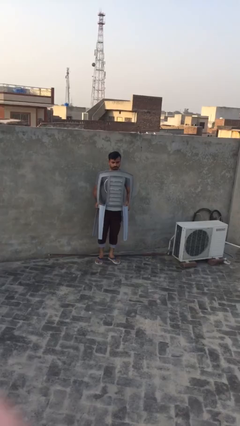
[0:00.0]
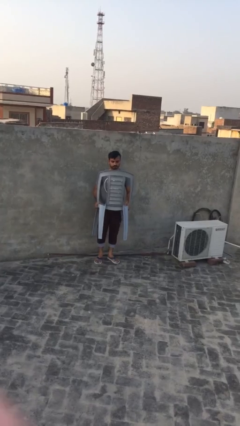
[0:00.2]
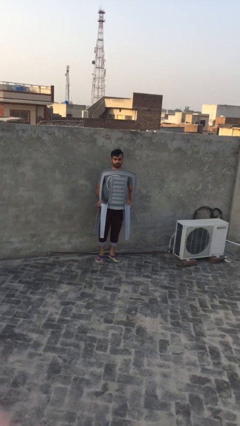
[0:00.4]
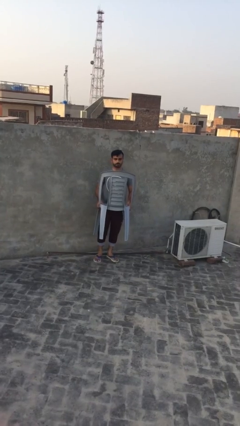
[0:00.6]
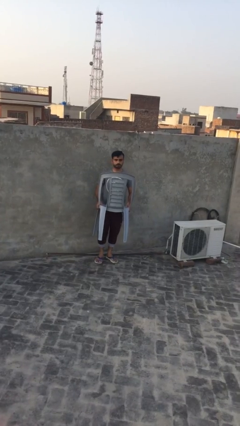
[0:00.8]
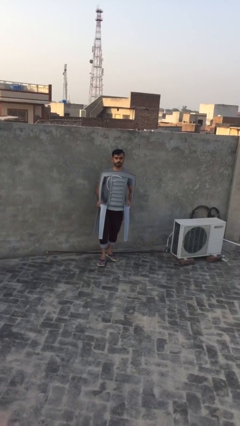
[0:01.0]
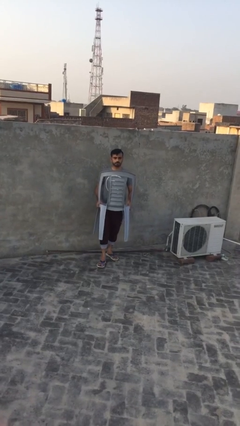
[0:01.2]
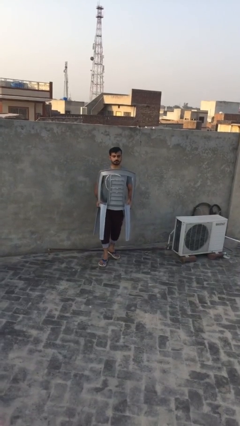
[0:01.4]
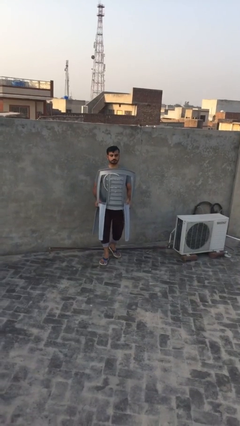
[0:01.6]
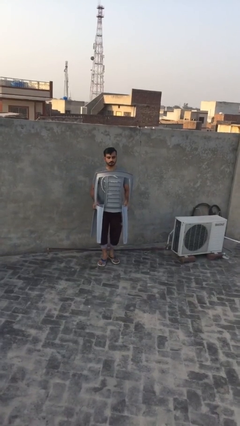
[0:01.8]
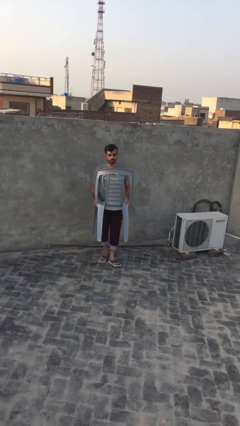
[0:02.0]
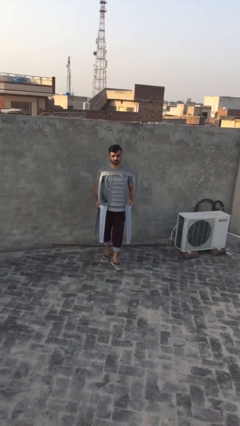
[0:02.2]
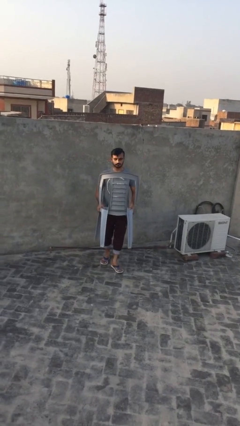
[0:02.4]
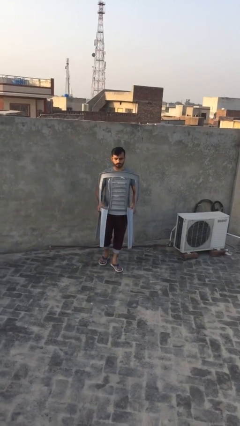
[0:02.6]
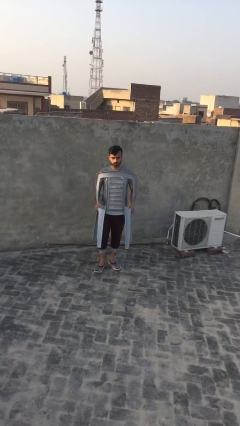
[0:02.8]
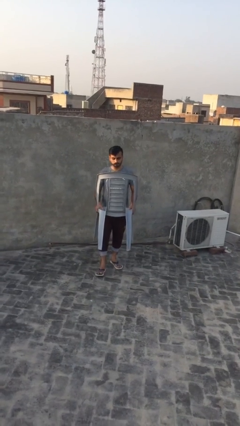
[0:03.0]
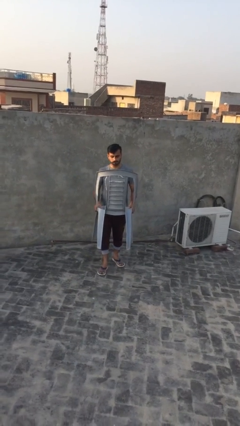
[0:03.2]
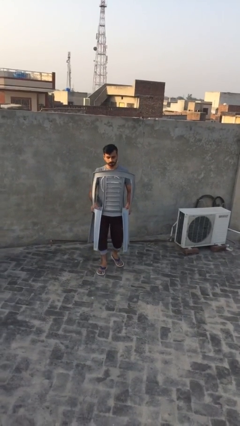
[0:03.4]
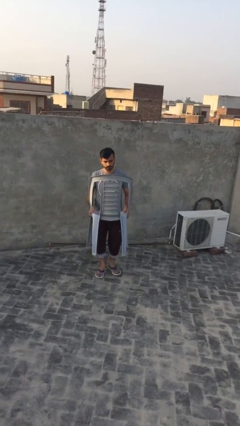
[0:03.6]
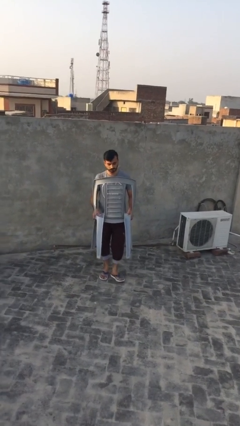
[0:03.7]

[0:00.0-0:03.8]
person carries heavy object

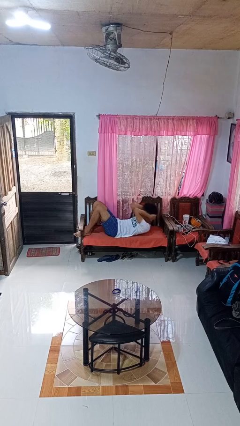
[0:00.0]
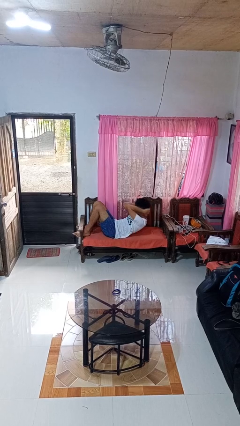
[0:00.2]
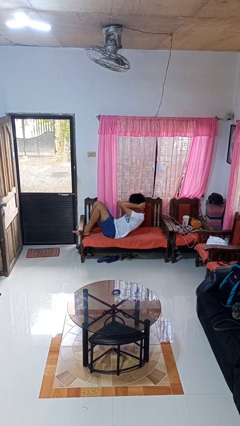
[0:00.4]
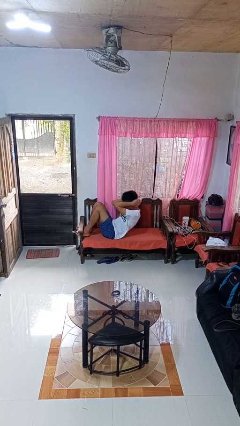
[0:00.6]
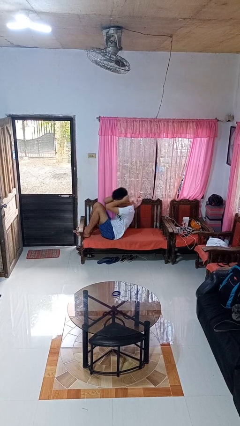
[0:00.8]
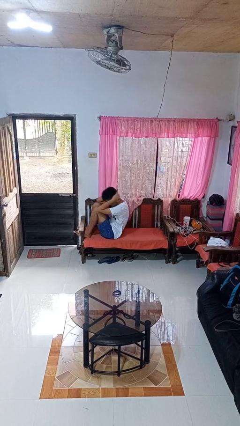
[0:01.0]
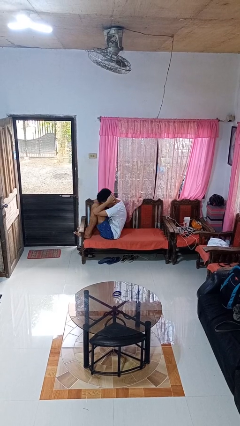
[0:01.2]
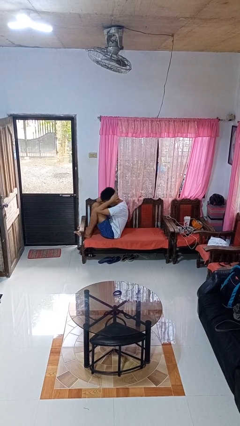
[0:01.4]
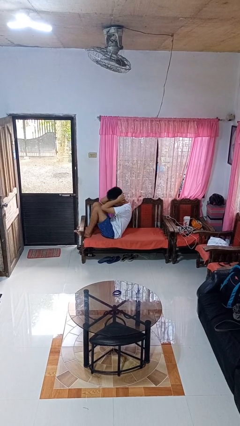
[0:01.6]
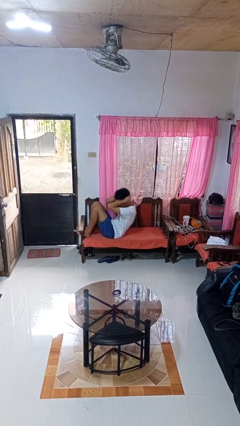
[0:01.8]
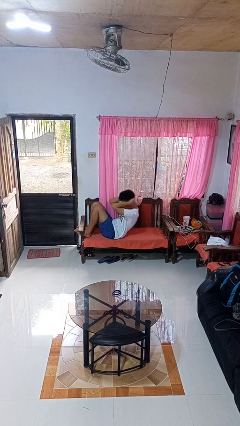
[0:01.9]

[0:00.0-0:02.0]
person exercises with situp

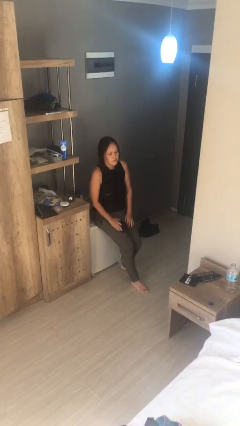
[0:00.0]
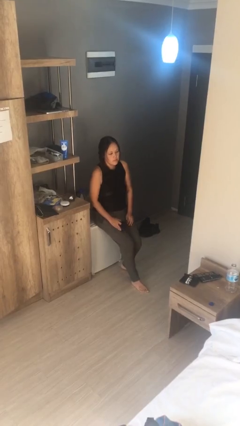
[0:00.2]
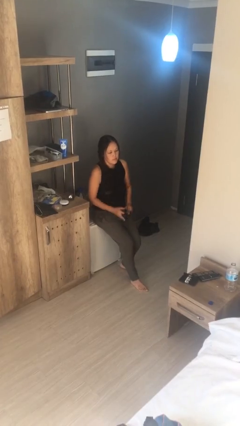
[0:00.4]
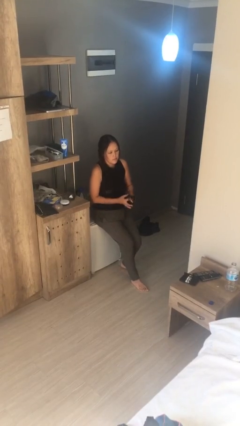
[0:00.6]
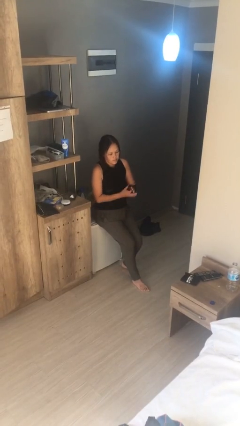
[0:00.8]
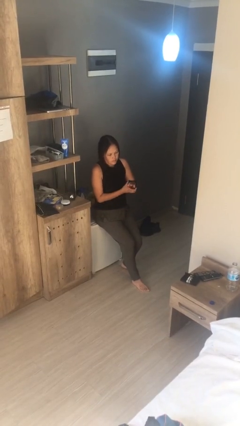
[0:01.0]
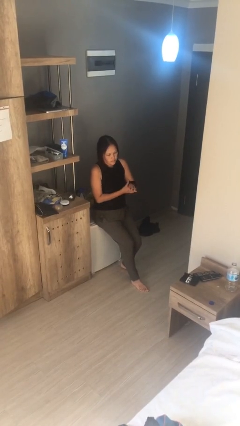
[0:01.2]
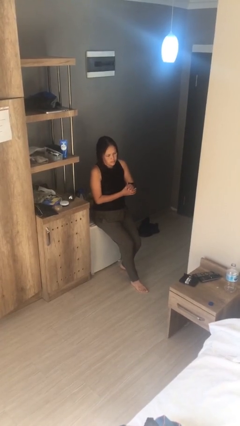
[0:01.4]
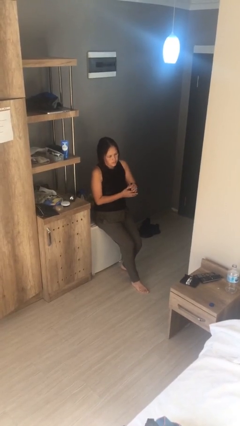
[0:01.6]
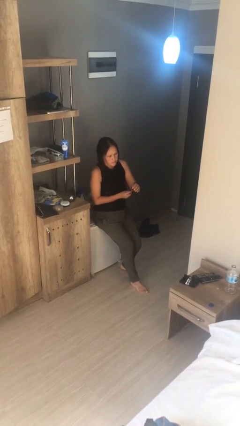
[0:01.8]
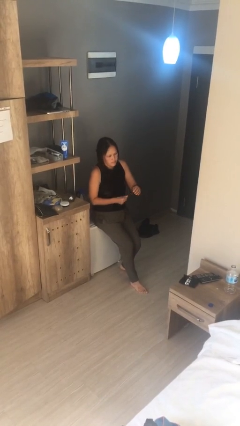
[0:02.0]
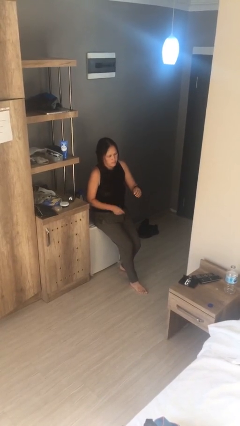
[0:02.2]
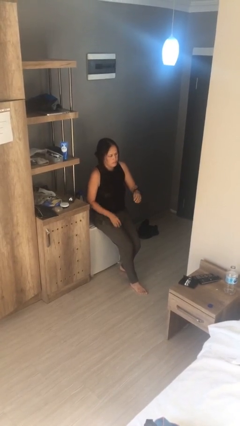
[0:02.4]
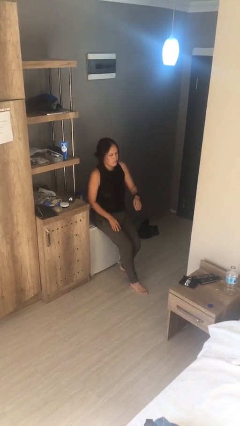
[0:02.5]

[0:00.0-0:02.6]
person puts on wristwatch

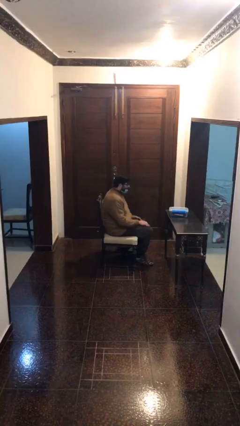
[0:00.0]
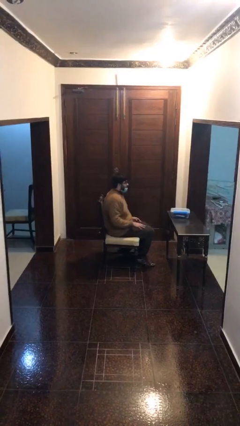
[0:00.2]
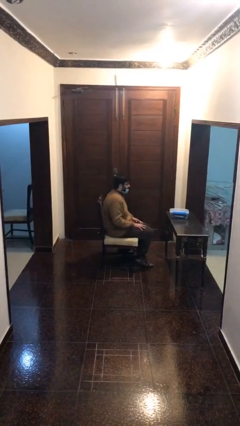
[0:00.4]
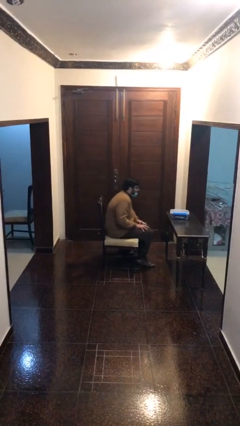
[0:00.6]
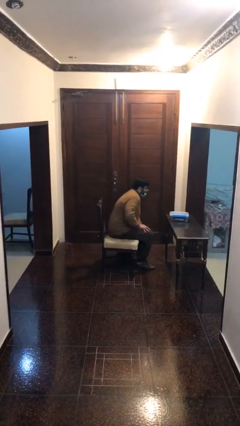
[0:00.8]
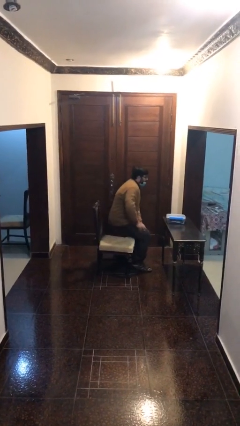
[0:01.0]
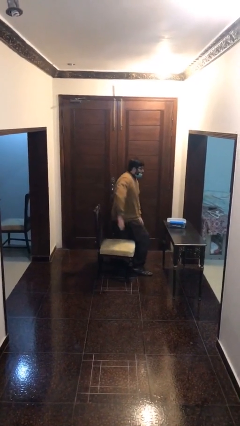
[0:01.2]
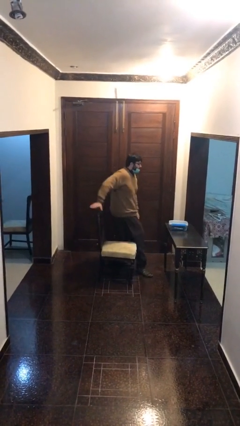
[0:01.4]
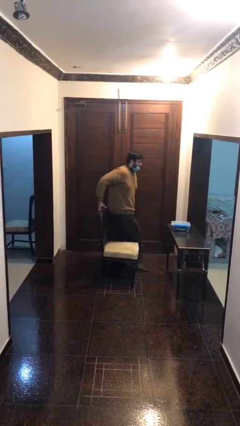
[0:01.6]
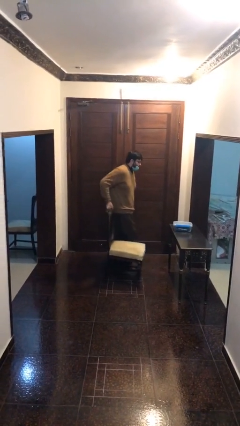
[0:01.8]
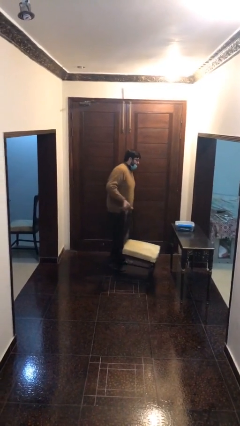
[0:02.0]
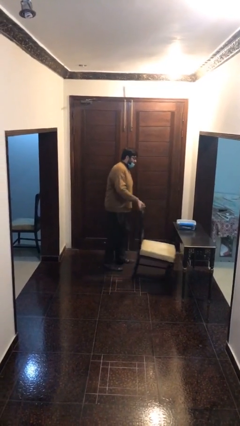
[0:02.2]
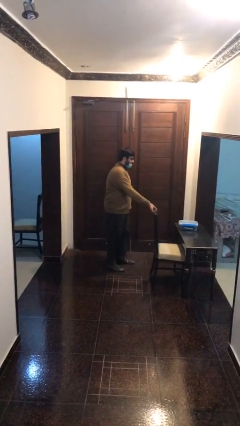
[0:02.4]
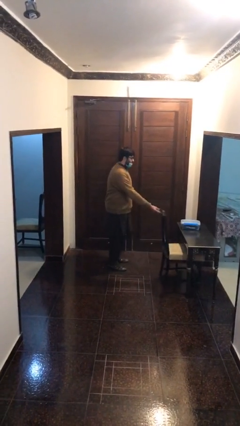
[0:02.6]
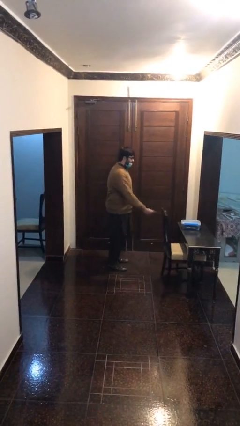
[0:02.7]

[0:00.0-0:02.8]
person stands up

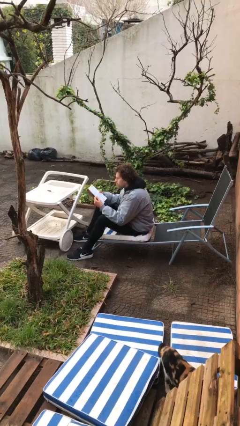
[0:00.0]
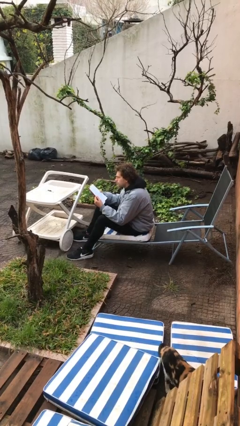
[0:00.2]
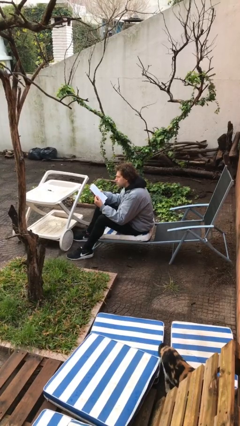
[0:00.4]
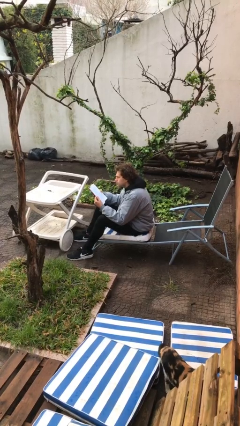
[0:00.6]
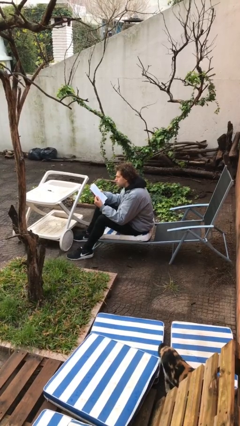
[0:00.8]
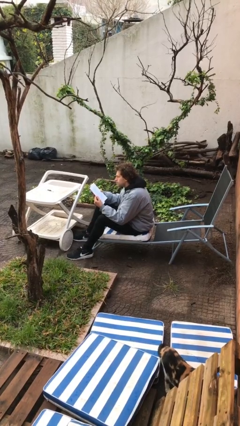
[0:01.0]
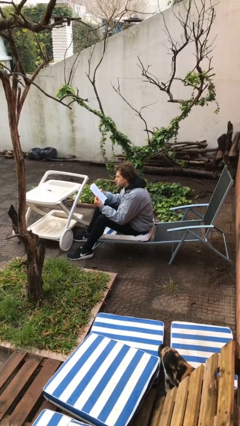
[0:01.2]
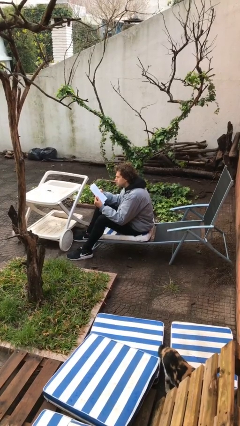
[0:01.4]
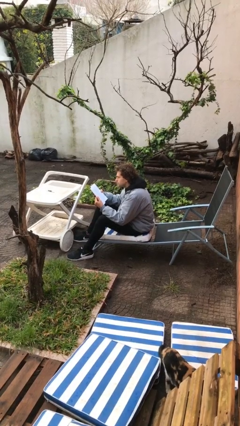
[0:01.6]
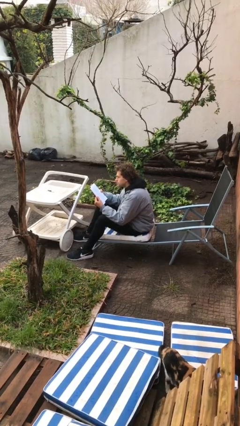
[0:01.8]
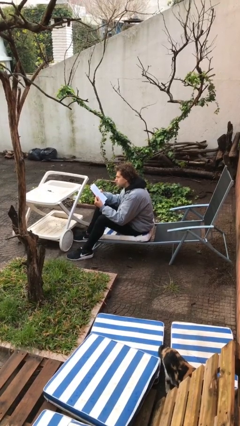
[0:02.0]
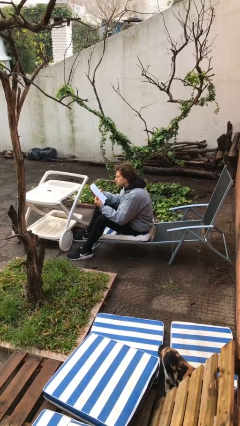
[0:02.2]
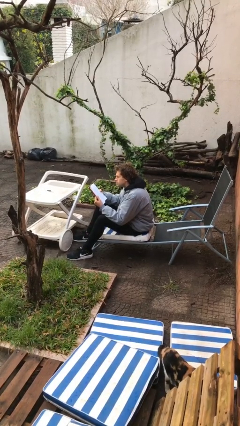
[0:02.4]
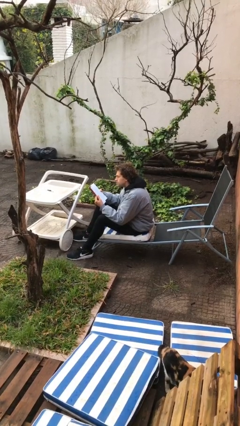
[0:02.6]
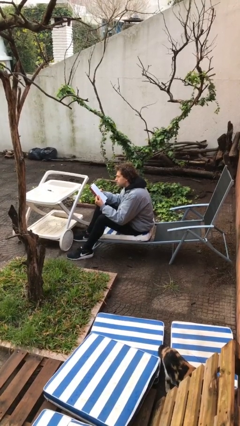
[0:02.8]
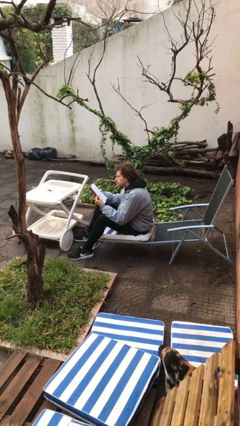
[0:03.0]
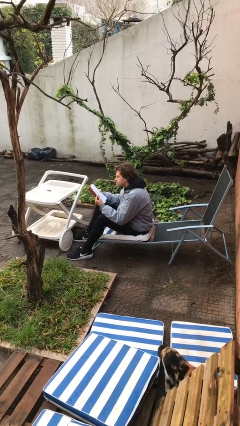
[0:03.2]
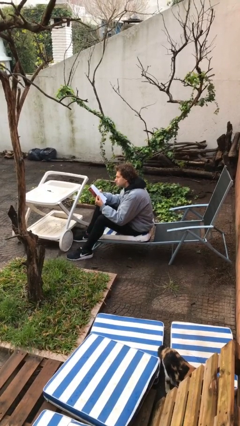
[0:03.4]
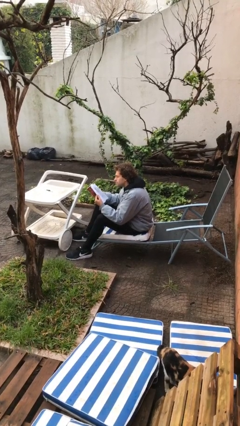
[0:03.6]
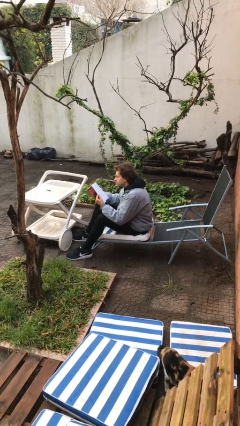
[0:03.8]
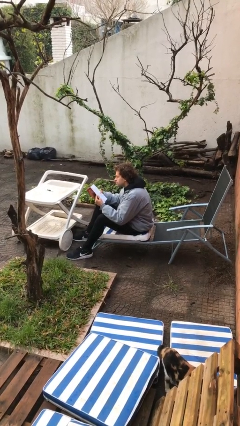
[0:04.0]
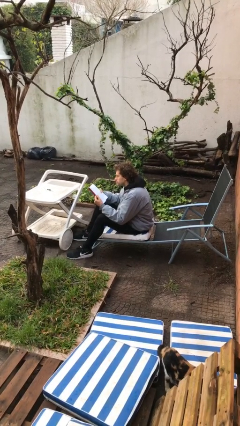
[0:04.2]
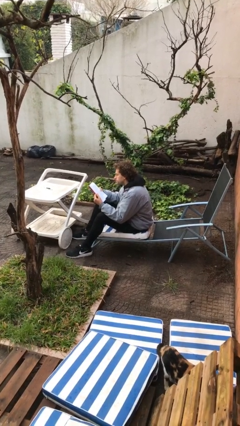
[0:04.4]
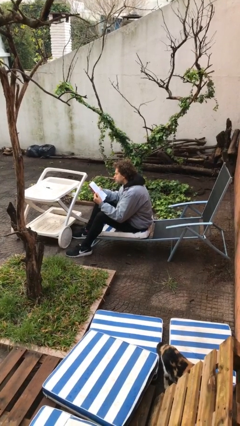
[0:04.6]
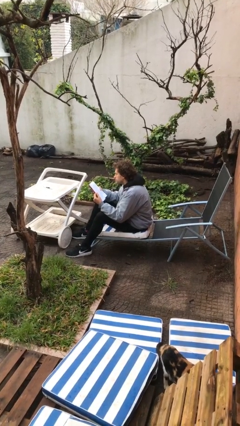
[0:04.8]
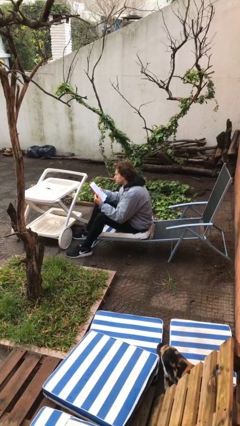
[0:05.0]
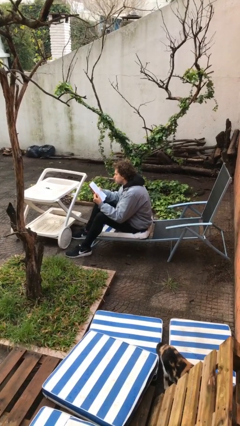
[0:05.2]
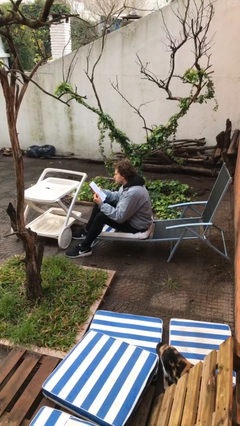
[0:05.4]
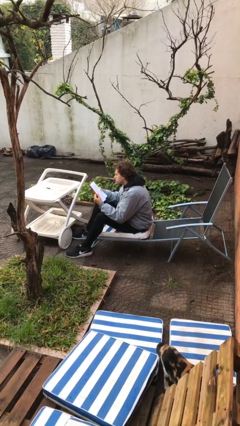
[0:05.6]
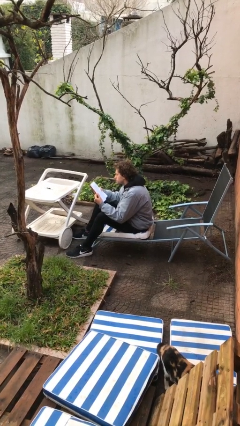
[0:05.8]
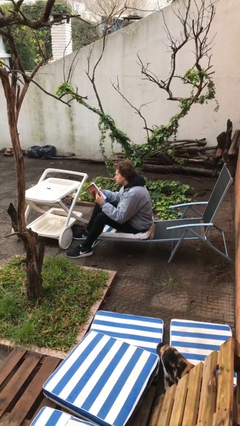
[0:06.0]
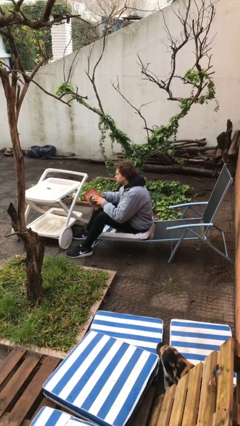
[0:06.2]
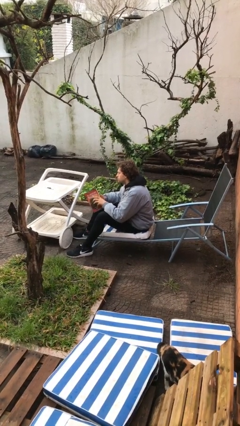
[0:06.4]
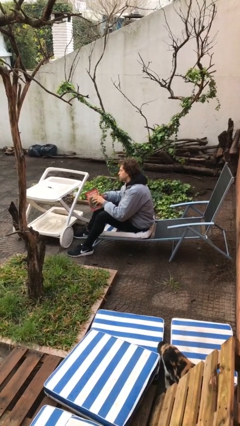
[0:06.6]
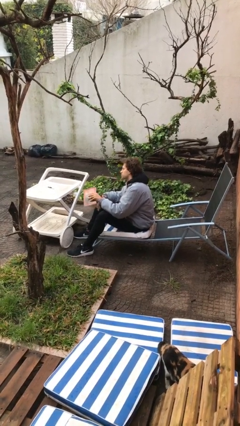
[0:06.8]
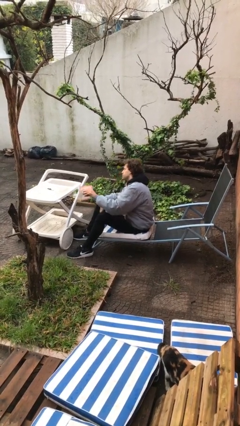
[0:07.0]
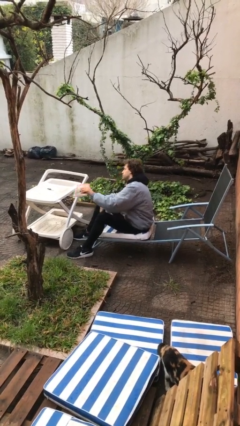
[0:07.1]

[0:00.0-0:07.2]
person reads document
